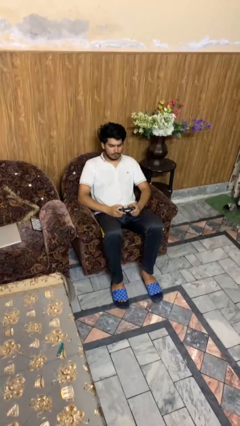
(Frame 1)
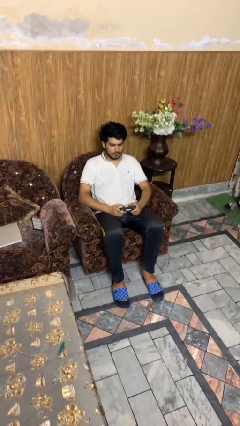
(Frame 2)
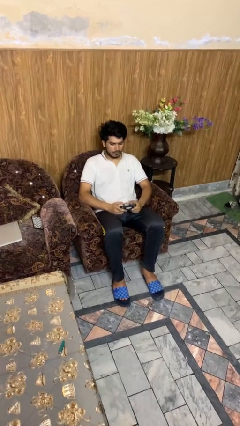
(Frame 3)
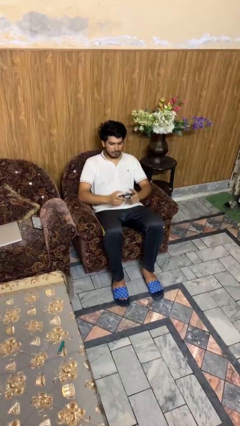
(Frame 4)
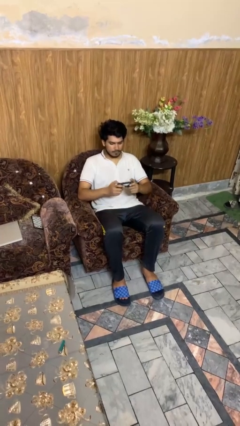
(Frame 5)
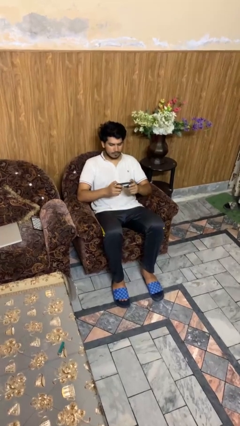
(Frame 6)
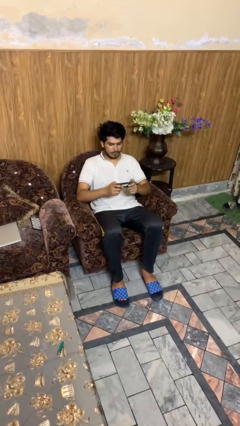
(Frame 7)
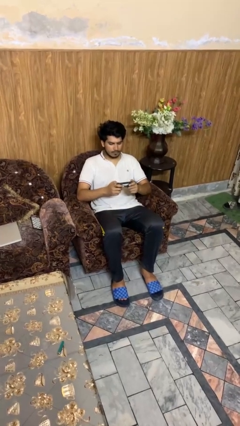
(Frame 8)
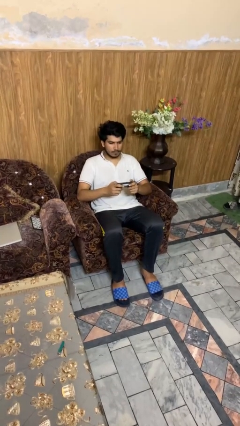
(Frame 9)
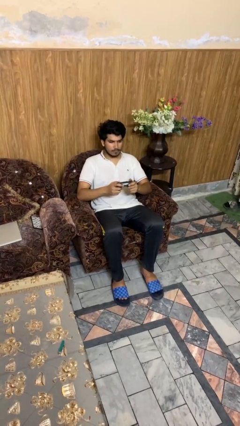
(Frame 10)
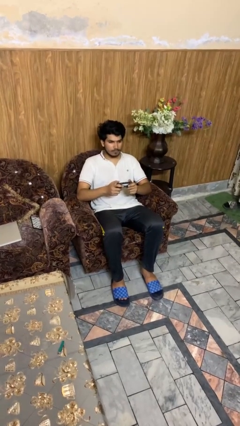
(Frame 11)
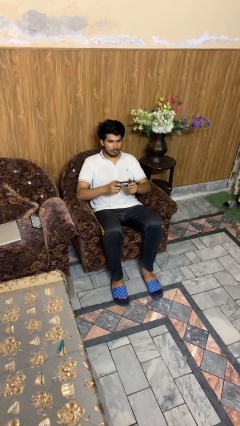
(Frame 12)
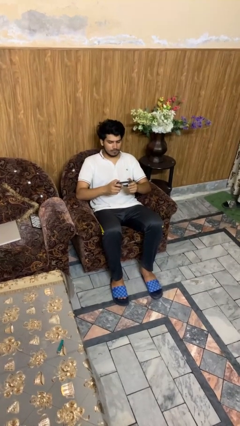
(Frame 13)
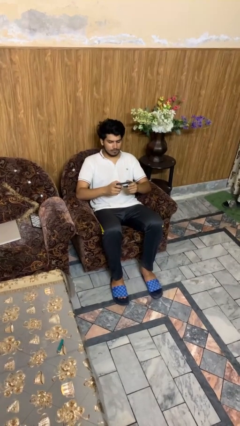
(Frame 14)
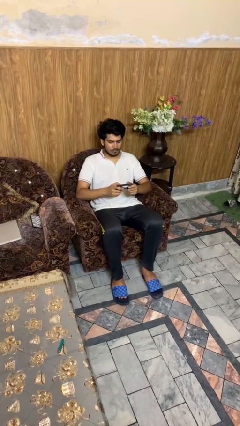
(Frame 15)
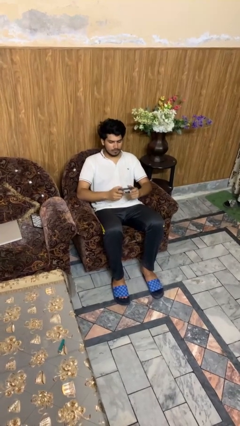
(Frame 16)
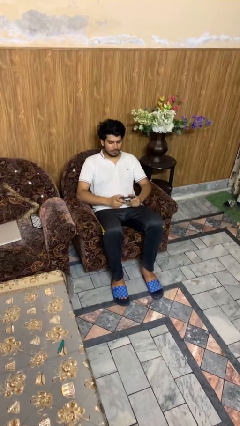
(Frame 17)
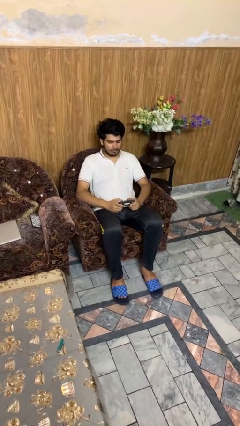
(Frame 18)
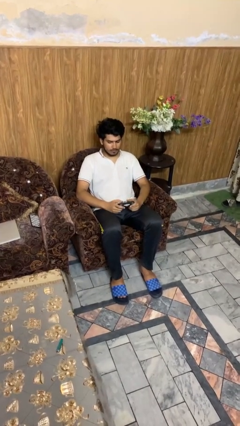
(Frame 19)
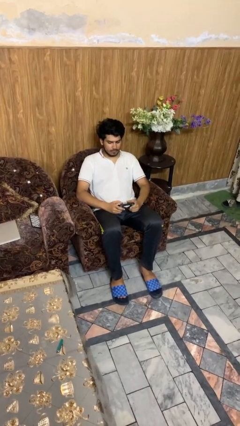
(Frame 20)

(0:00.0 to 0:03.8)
person interacts with handheld game

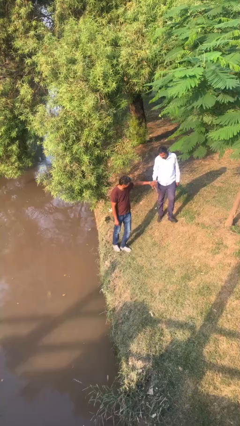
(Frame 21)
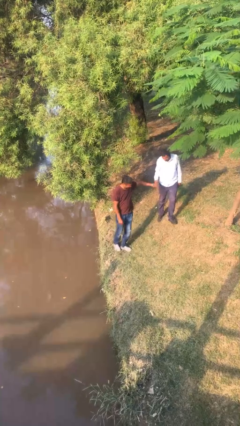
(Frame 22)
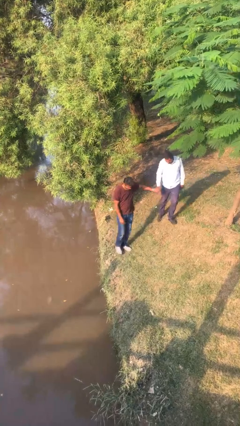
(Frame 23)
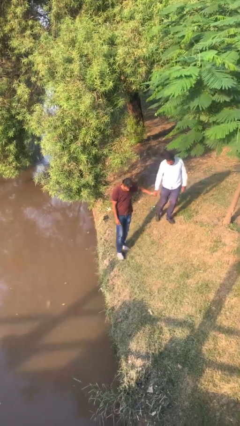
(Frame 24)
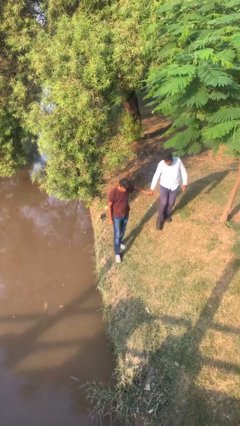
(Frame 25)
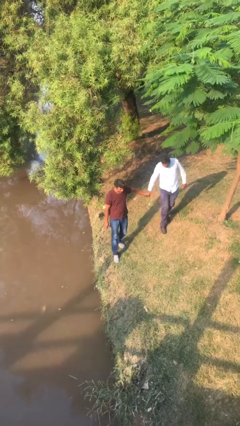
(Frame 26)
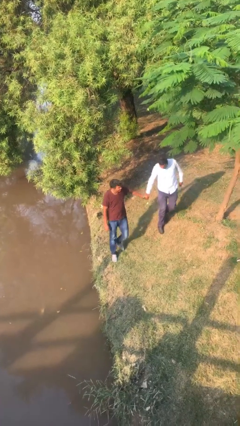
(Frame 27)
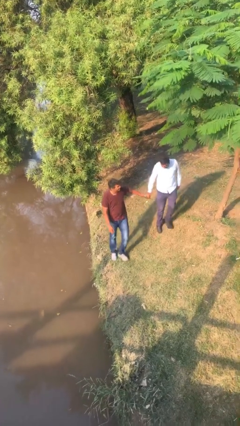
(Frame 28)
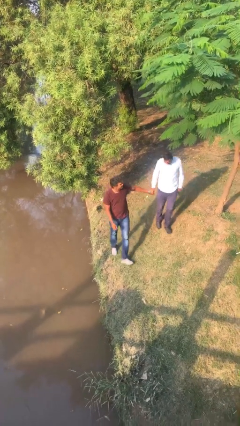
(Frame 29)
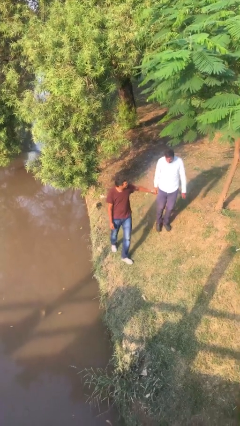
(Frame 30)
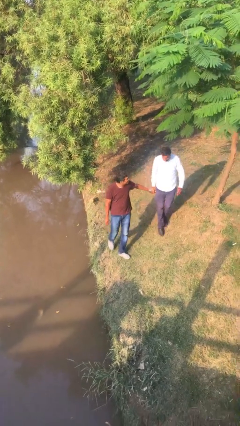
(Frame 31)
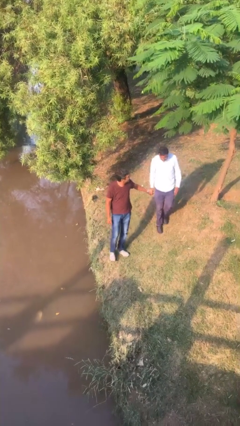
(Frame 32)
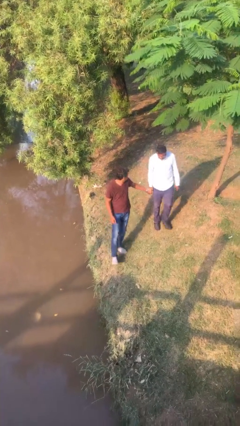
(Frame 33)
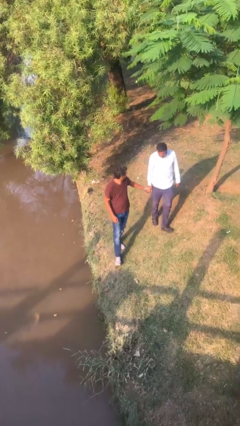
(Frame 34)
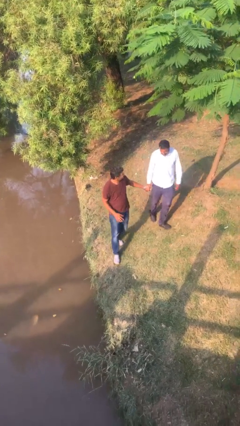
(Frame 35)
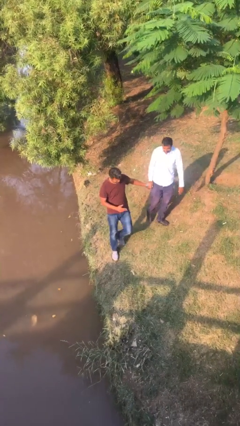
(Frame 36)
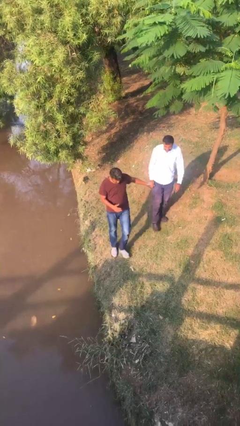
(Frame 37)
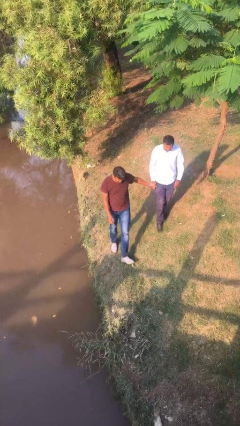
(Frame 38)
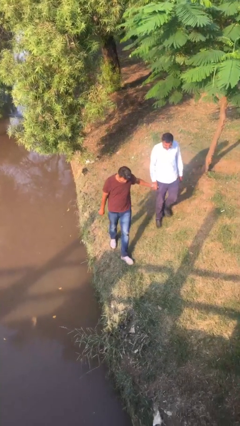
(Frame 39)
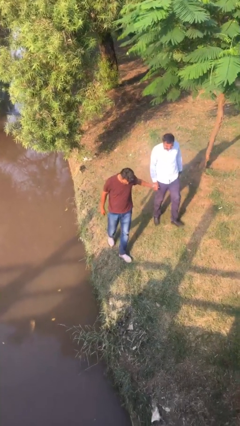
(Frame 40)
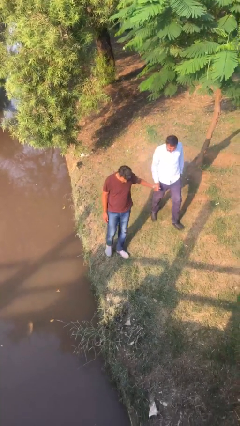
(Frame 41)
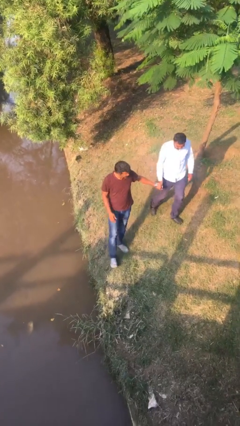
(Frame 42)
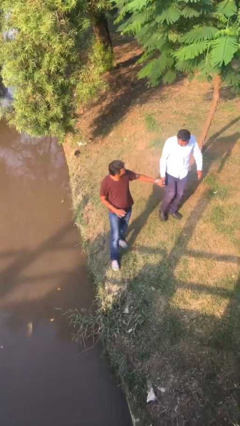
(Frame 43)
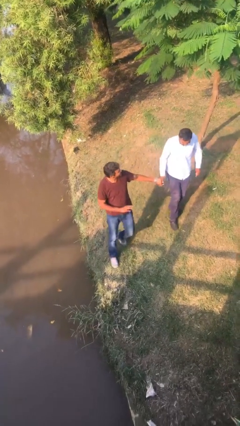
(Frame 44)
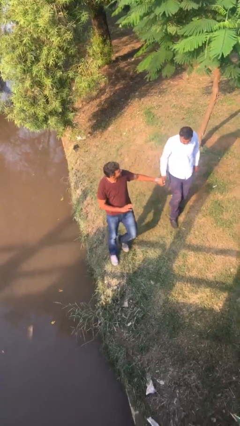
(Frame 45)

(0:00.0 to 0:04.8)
person holds hand

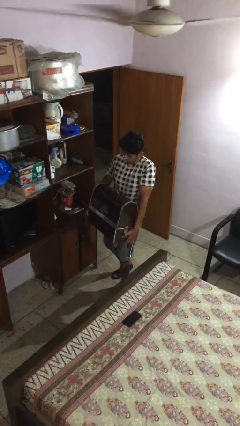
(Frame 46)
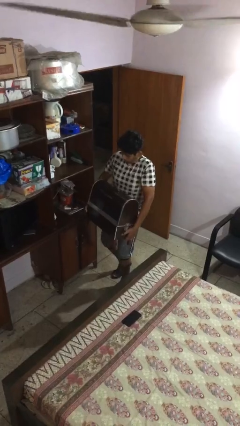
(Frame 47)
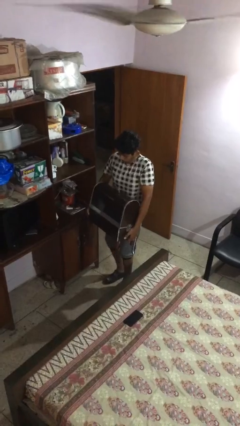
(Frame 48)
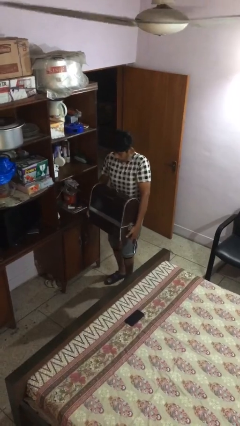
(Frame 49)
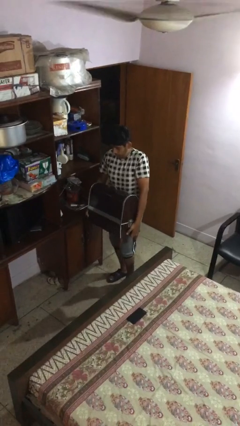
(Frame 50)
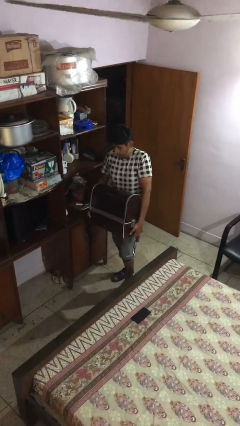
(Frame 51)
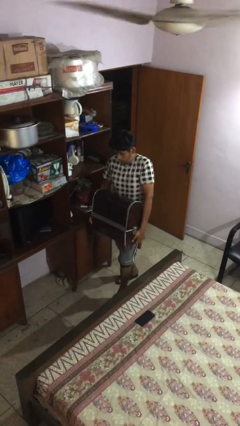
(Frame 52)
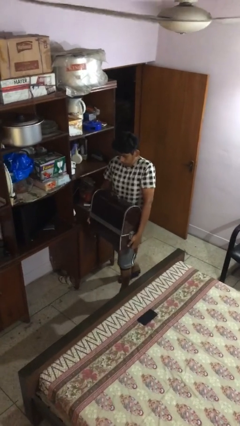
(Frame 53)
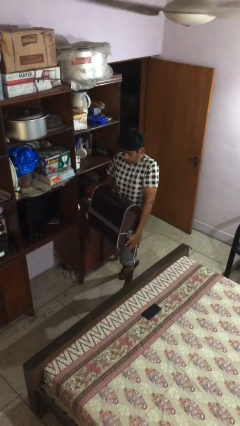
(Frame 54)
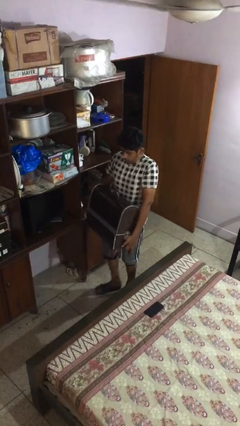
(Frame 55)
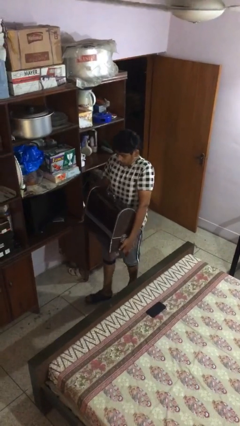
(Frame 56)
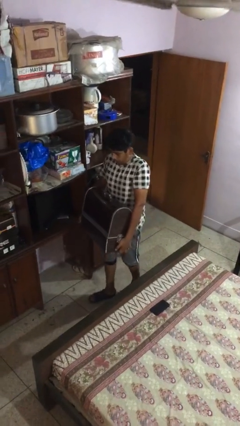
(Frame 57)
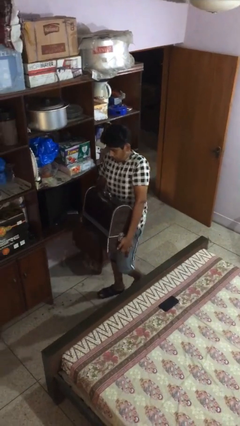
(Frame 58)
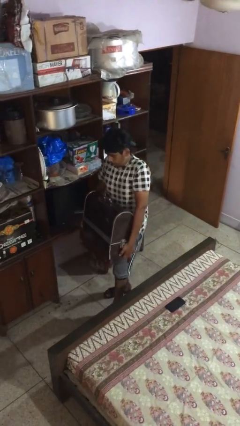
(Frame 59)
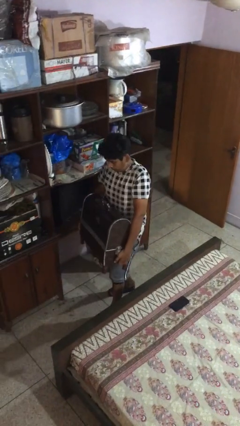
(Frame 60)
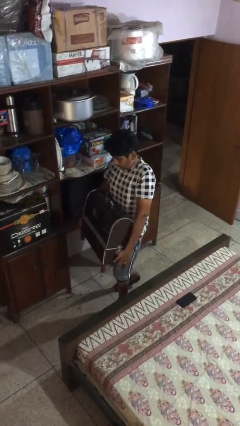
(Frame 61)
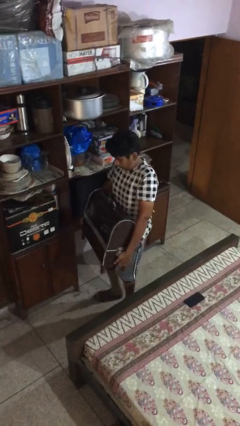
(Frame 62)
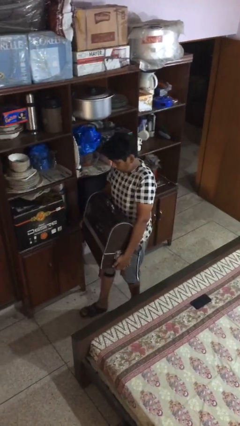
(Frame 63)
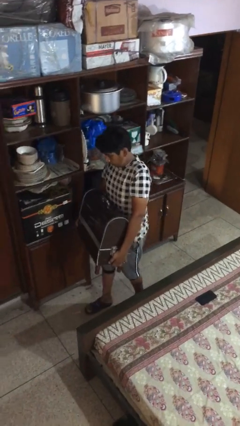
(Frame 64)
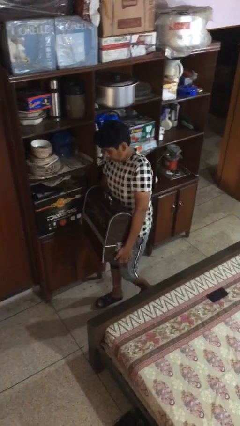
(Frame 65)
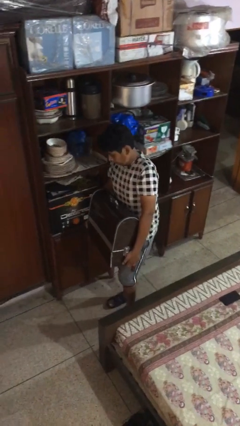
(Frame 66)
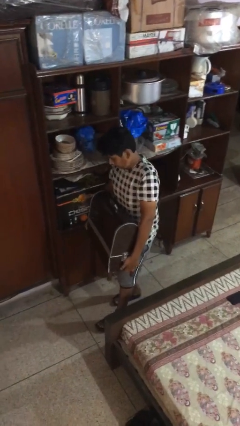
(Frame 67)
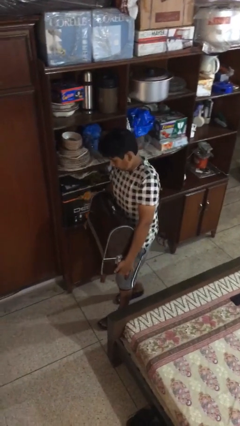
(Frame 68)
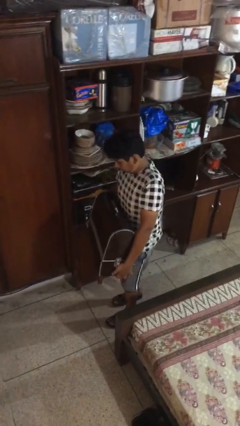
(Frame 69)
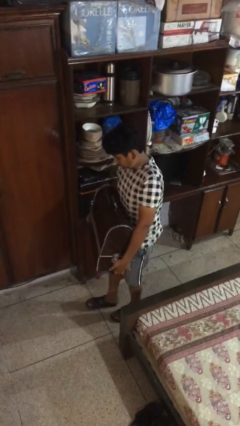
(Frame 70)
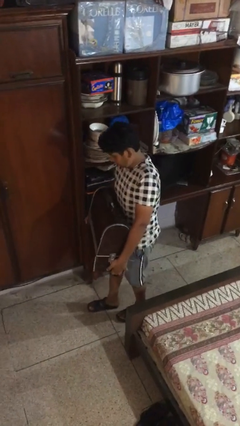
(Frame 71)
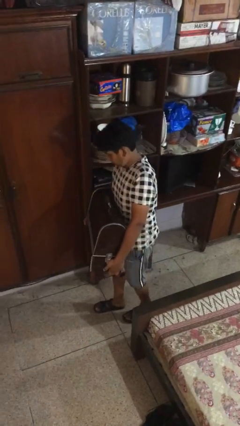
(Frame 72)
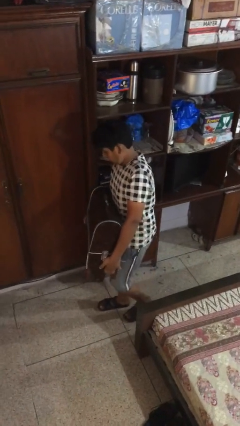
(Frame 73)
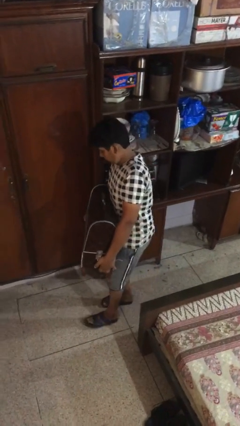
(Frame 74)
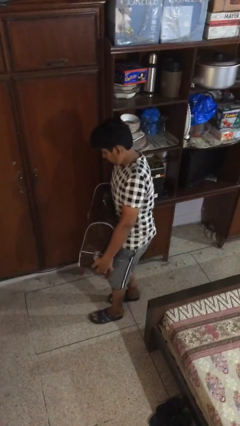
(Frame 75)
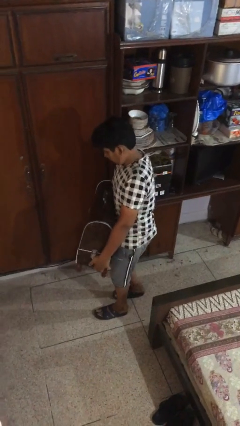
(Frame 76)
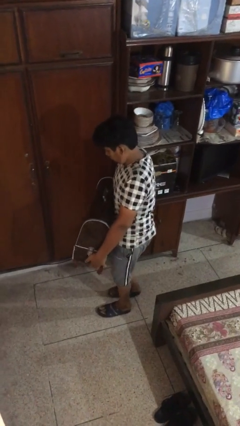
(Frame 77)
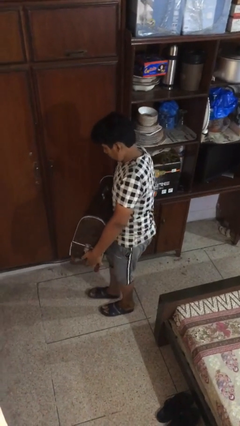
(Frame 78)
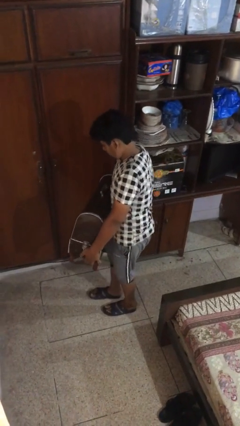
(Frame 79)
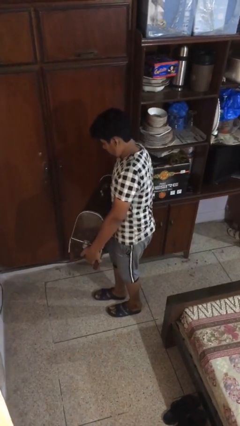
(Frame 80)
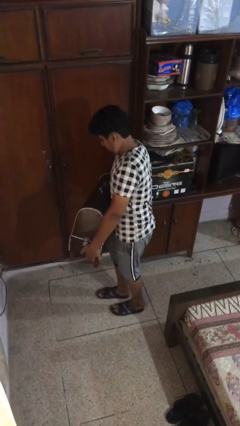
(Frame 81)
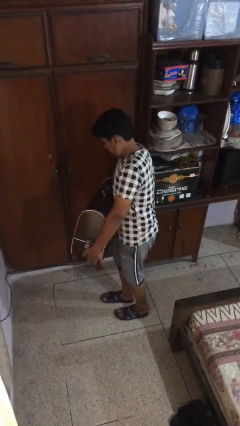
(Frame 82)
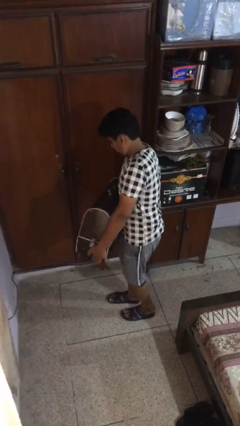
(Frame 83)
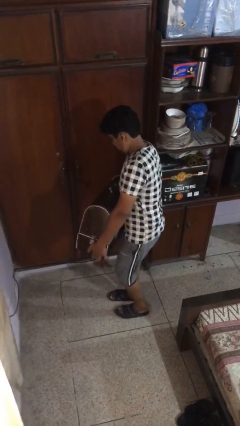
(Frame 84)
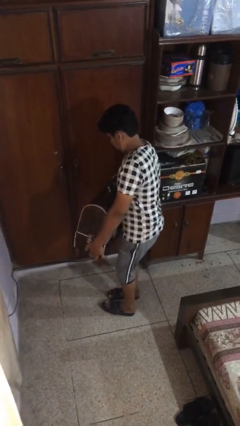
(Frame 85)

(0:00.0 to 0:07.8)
person carries heavy object

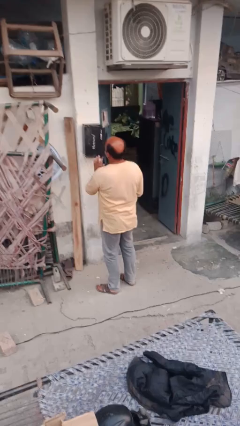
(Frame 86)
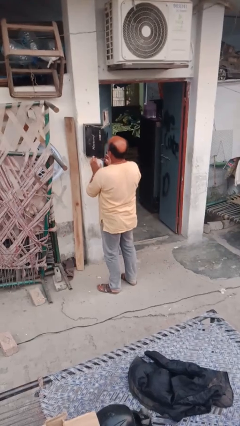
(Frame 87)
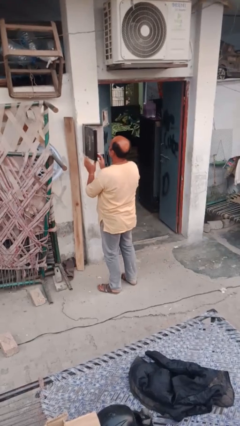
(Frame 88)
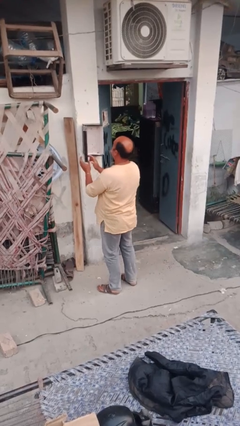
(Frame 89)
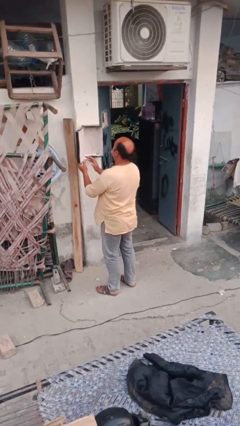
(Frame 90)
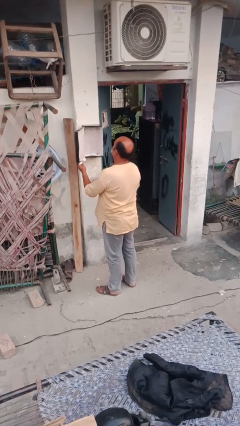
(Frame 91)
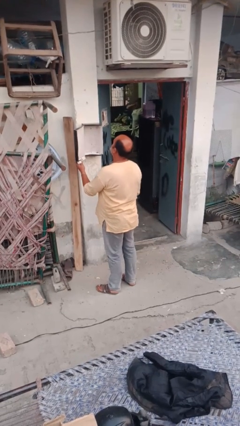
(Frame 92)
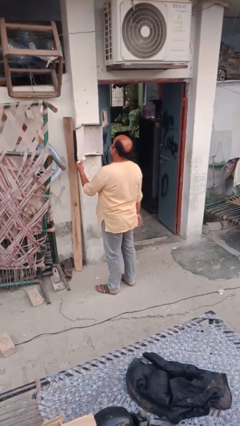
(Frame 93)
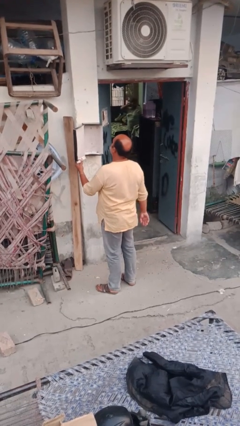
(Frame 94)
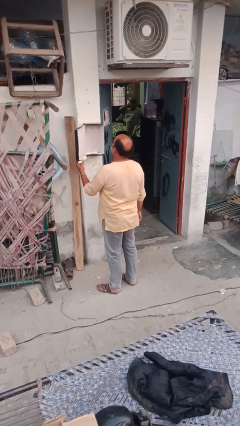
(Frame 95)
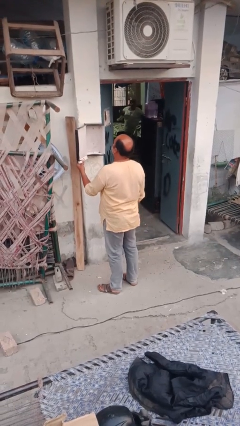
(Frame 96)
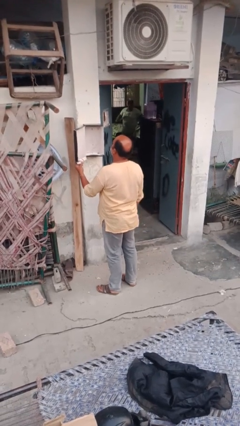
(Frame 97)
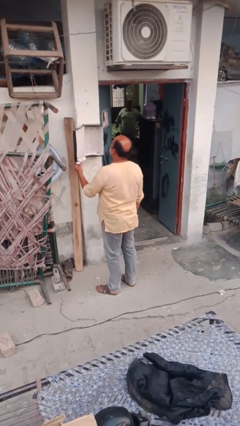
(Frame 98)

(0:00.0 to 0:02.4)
person opens mailbox
